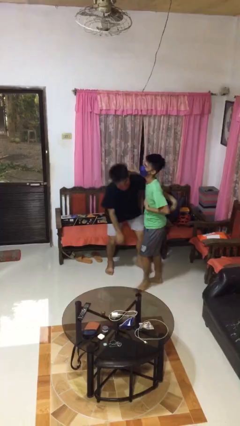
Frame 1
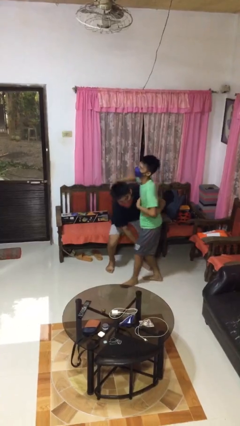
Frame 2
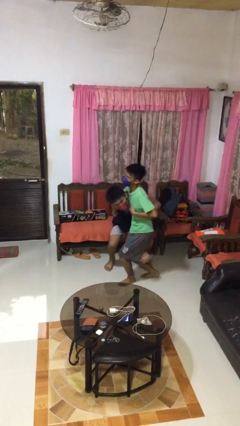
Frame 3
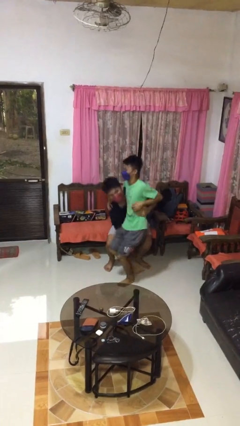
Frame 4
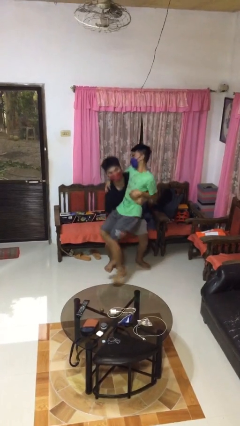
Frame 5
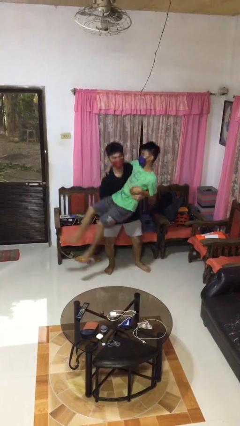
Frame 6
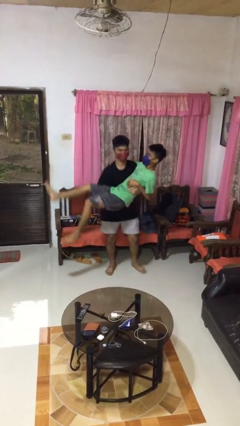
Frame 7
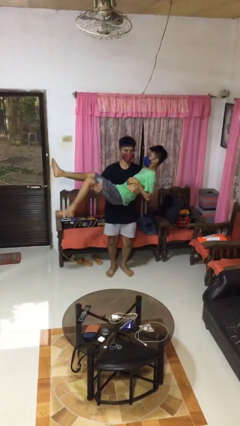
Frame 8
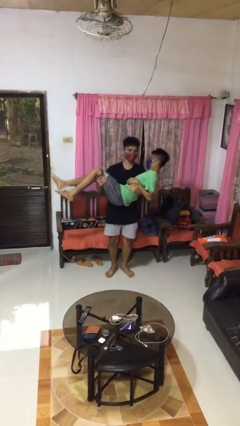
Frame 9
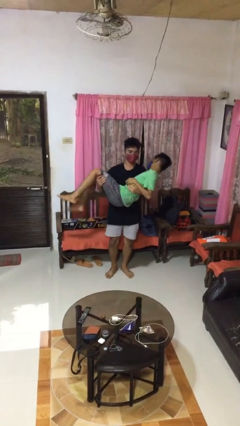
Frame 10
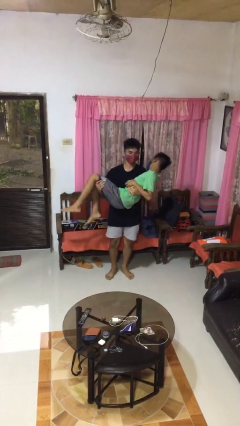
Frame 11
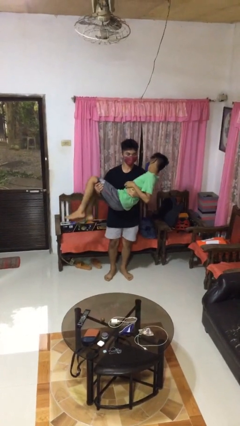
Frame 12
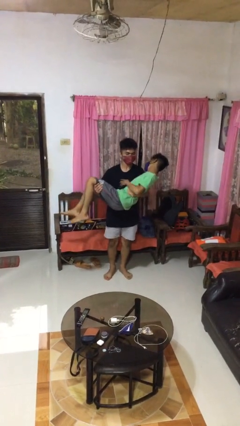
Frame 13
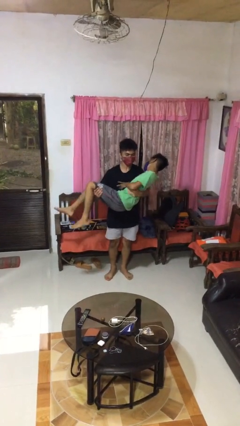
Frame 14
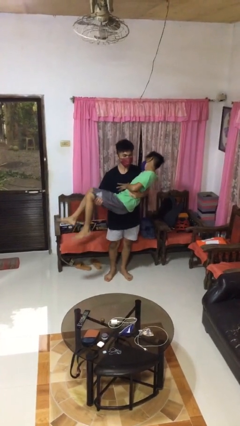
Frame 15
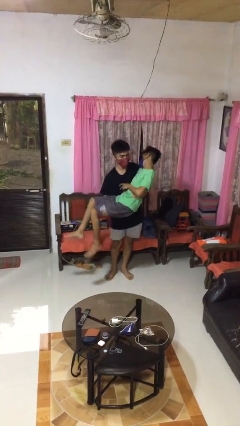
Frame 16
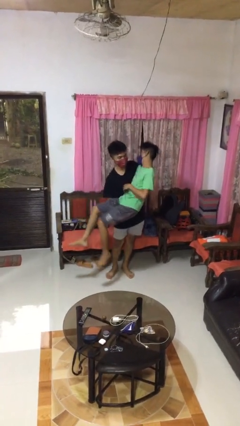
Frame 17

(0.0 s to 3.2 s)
person picks up person

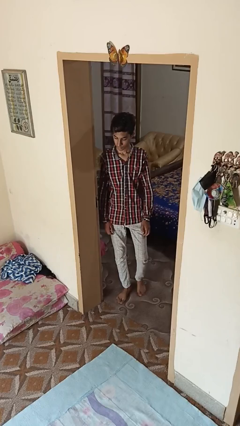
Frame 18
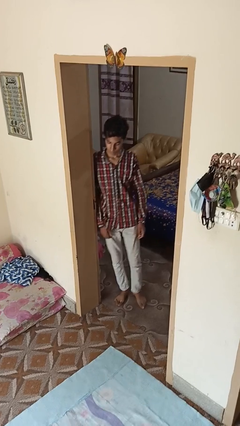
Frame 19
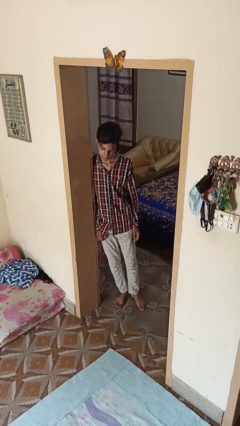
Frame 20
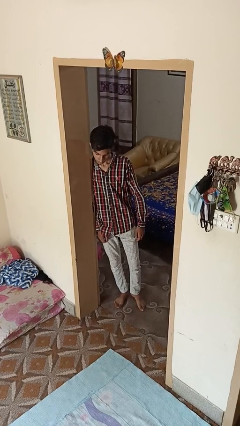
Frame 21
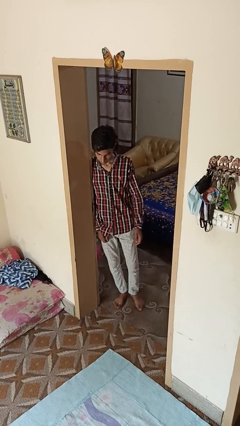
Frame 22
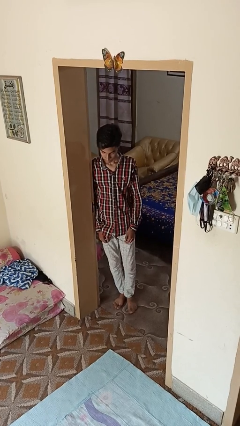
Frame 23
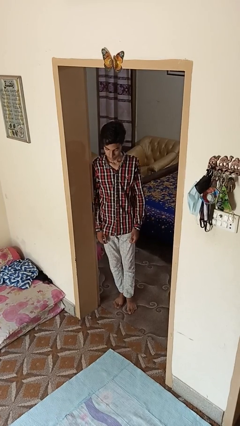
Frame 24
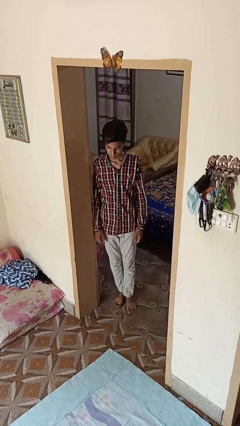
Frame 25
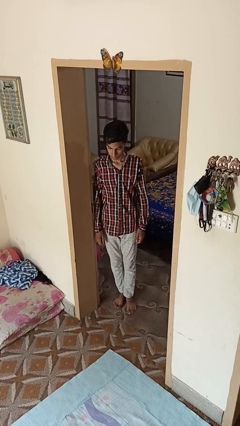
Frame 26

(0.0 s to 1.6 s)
person bumps into wall

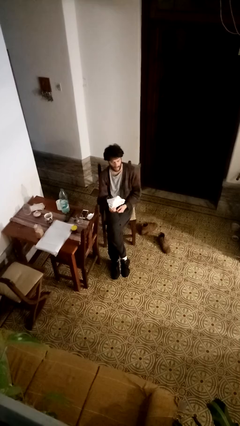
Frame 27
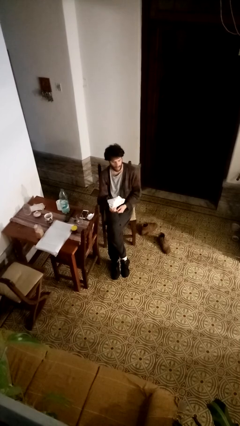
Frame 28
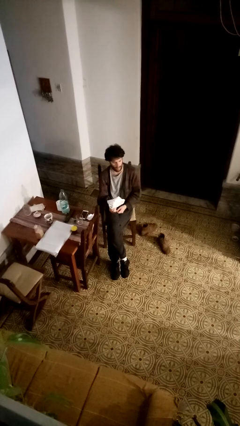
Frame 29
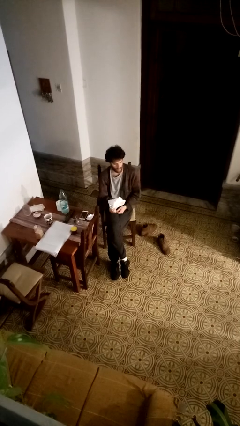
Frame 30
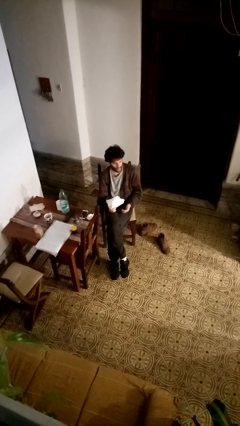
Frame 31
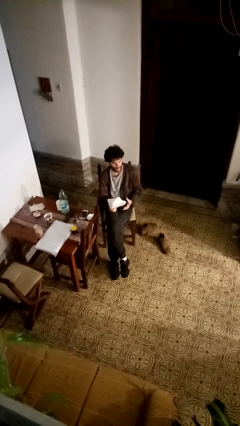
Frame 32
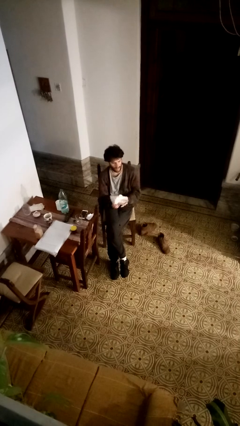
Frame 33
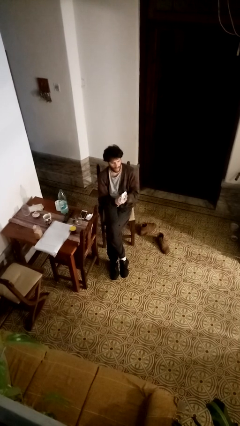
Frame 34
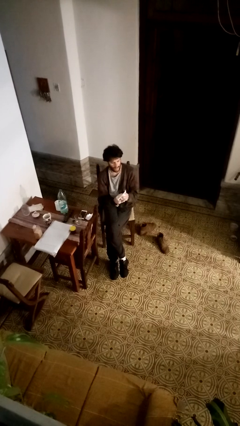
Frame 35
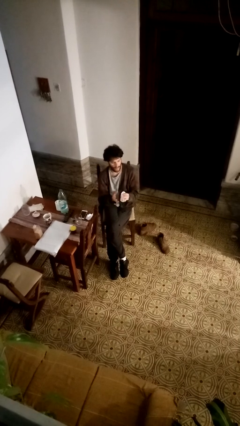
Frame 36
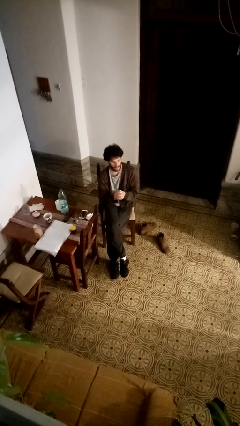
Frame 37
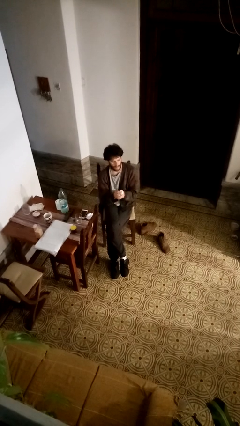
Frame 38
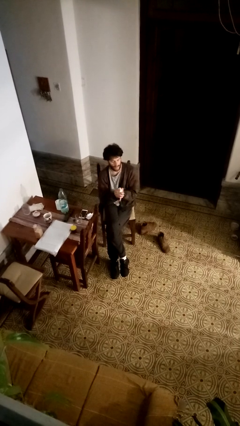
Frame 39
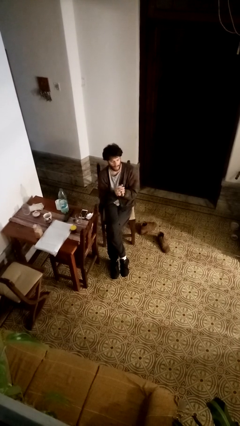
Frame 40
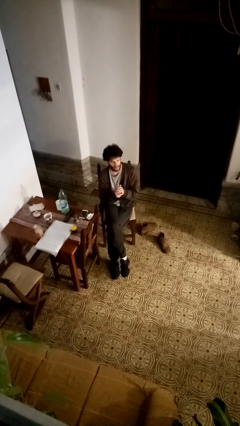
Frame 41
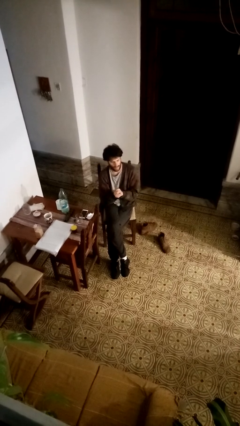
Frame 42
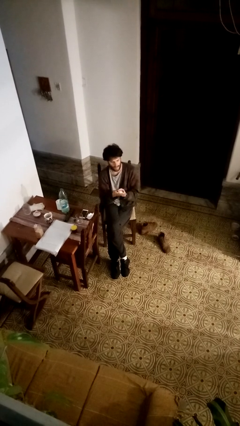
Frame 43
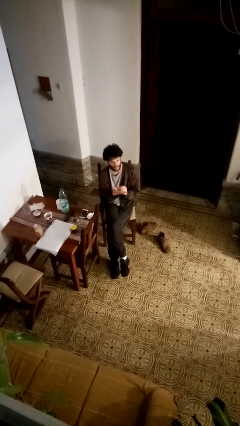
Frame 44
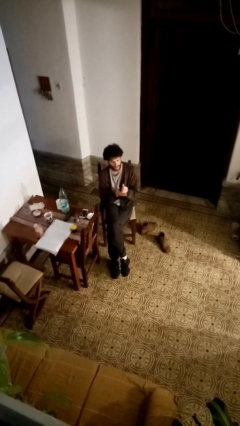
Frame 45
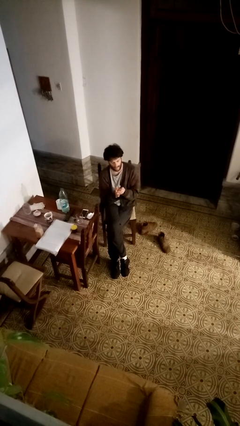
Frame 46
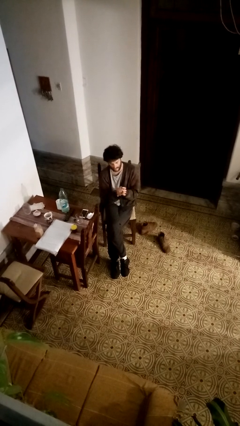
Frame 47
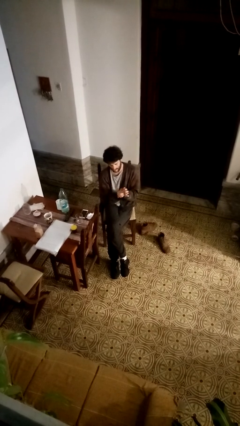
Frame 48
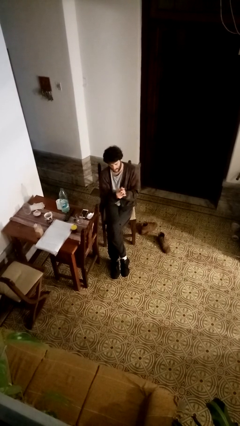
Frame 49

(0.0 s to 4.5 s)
person crumples paper

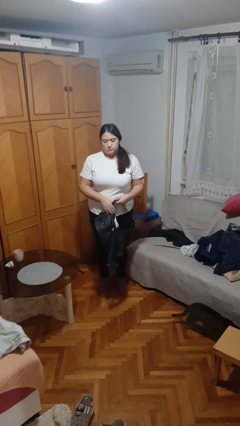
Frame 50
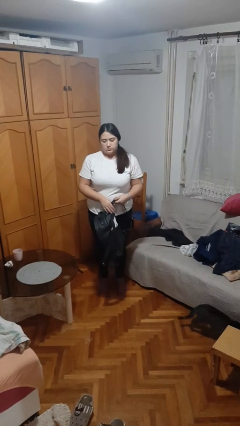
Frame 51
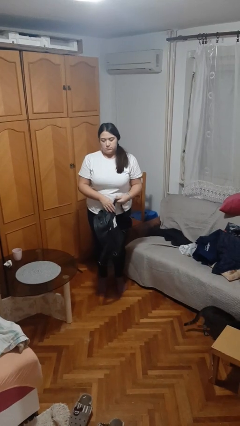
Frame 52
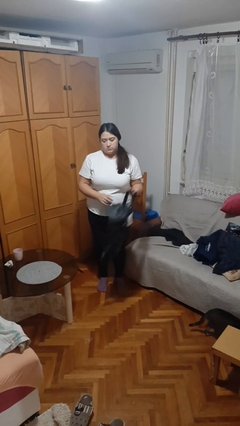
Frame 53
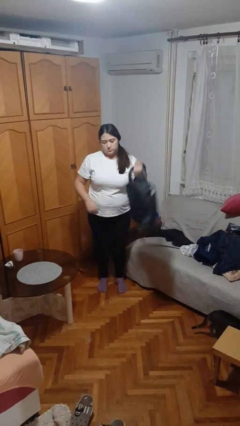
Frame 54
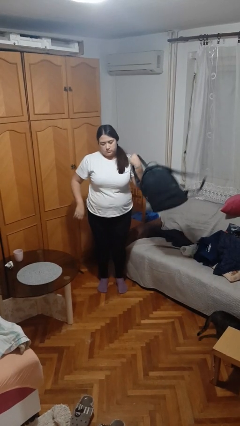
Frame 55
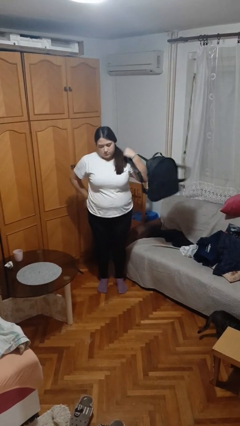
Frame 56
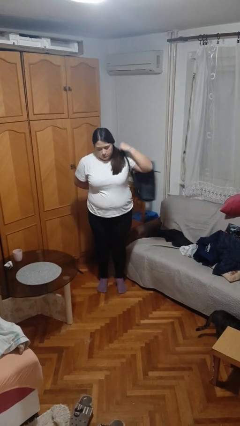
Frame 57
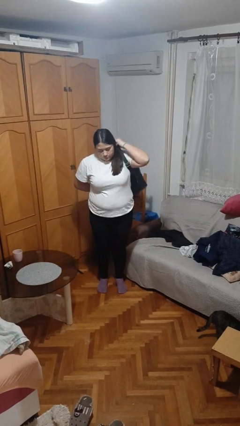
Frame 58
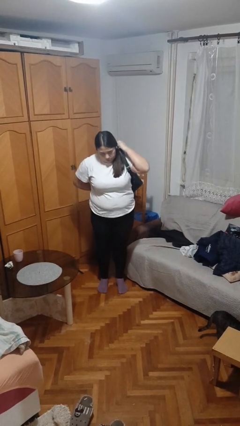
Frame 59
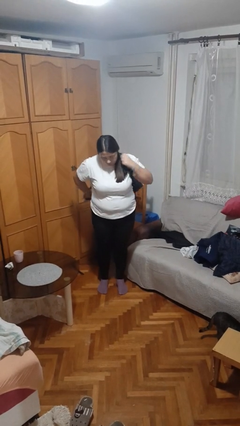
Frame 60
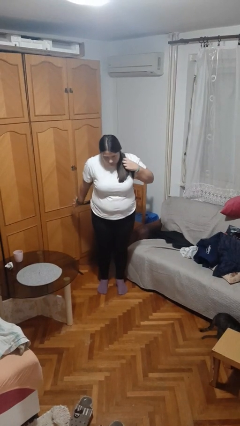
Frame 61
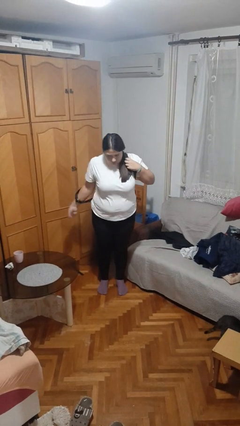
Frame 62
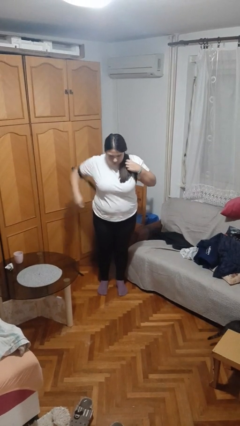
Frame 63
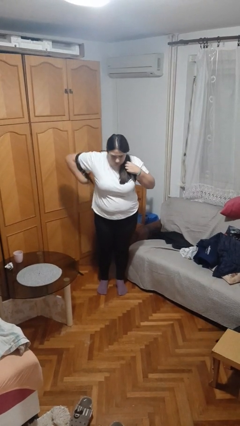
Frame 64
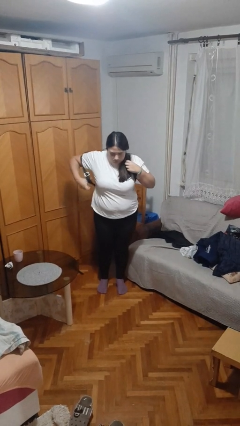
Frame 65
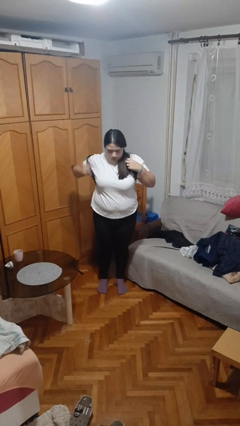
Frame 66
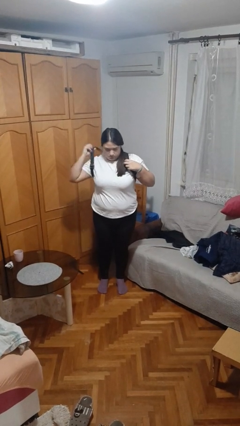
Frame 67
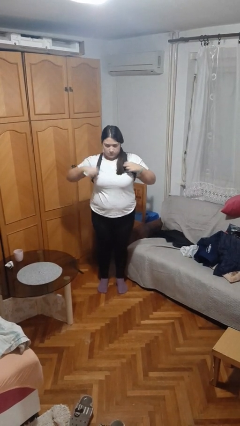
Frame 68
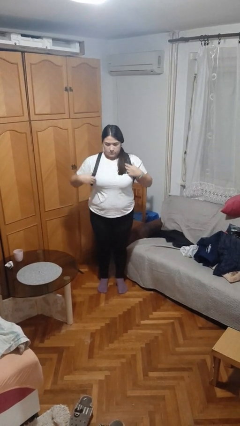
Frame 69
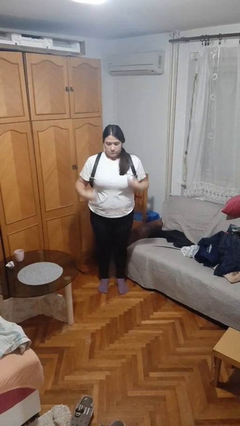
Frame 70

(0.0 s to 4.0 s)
person puts on backpack

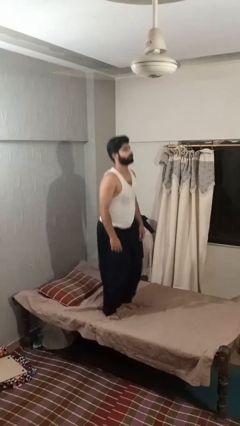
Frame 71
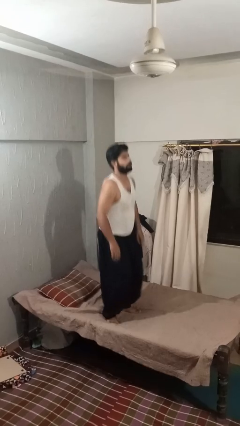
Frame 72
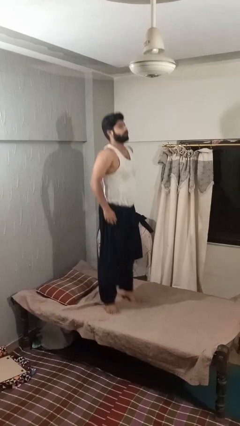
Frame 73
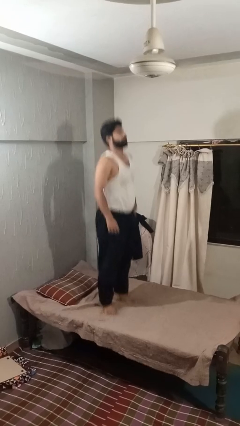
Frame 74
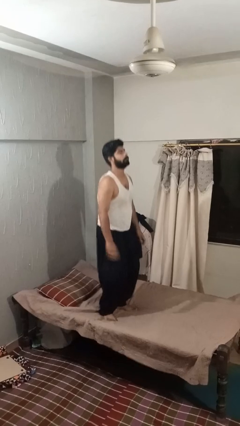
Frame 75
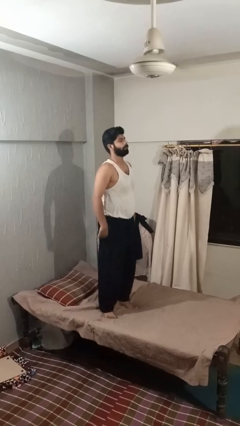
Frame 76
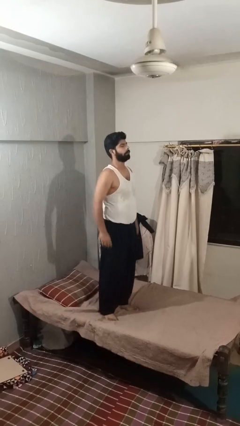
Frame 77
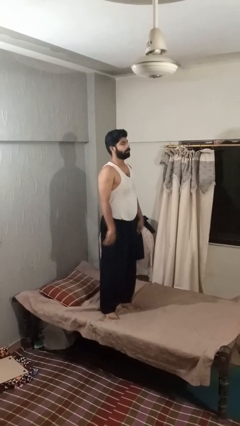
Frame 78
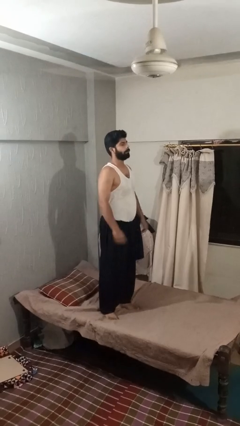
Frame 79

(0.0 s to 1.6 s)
person jumps on bed

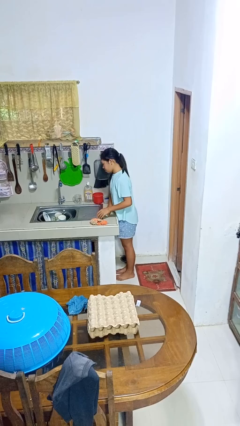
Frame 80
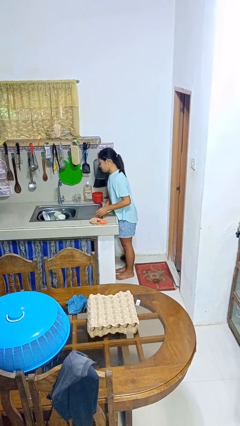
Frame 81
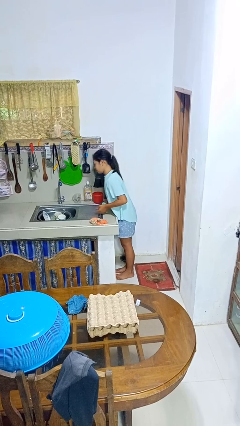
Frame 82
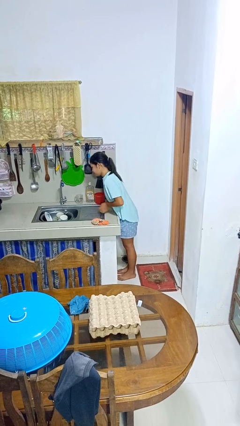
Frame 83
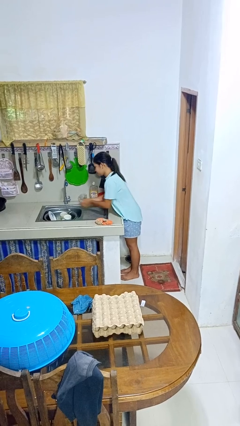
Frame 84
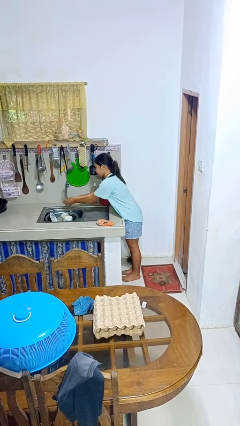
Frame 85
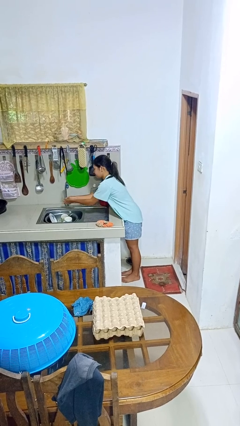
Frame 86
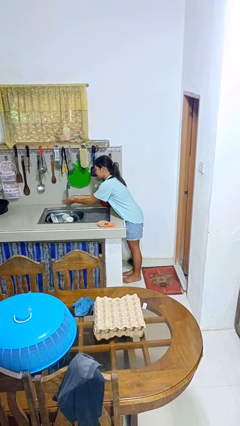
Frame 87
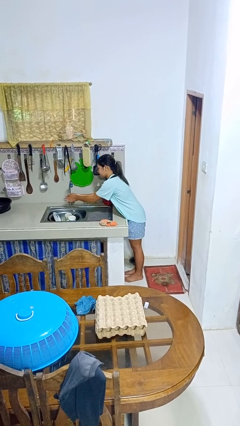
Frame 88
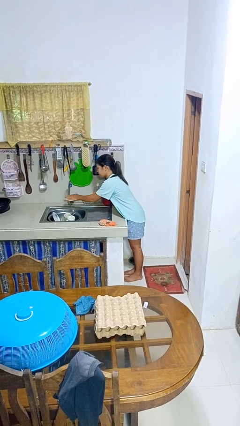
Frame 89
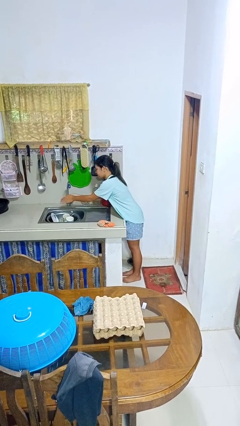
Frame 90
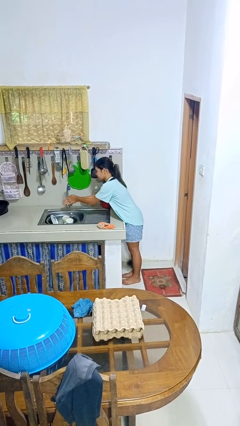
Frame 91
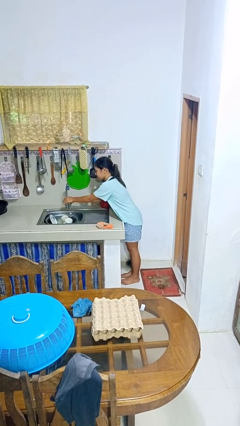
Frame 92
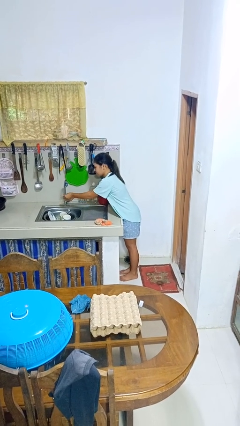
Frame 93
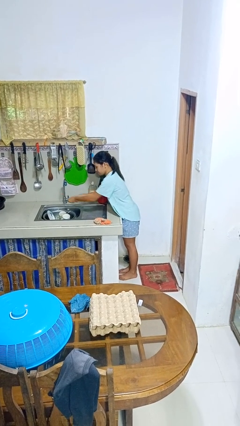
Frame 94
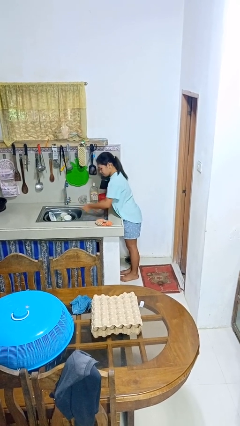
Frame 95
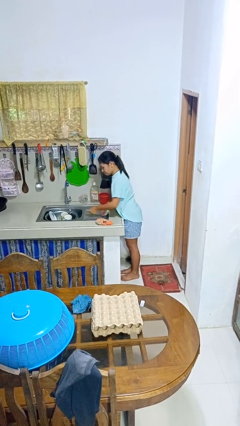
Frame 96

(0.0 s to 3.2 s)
person washes hands
